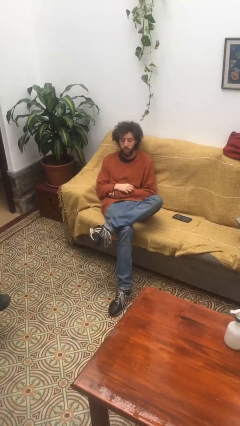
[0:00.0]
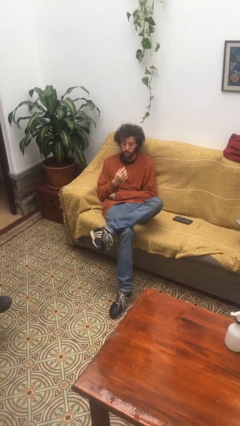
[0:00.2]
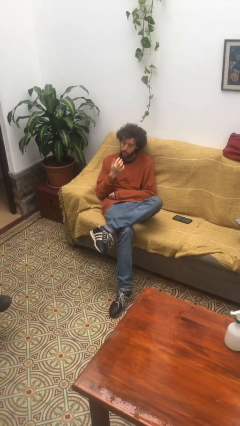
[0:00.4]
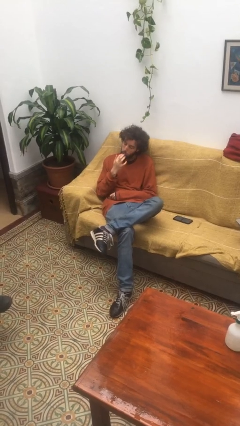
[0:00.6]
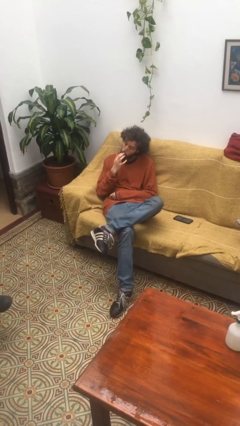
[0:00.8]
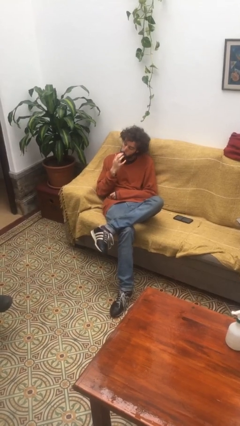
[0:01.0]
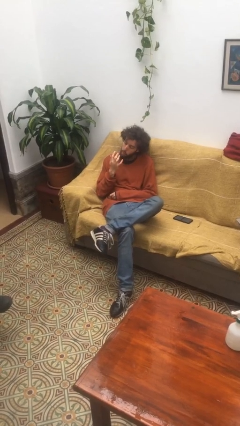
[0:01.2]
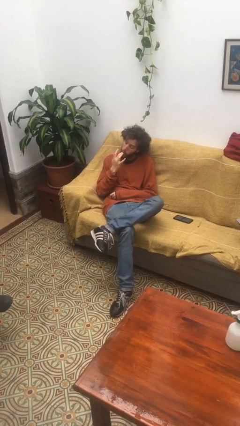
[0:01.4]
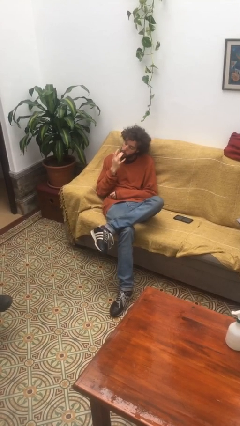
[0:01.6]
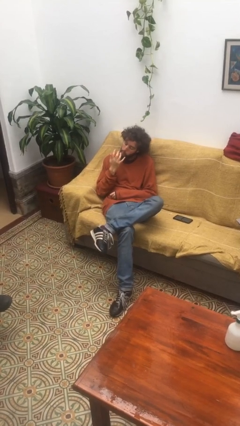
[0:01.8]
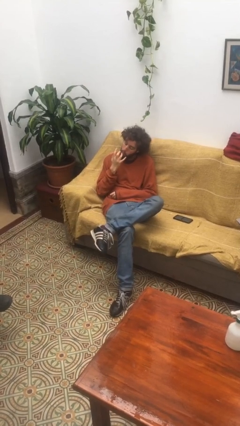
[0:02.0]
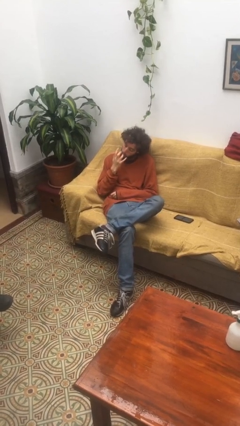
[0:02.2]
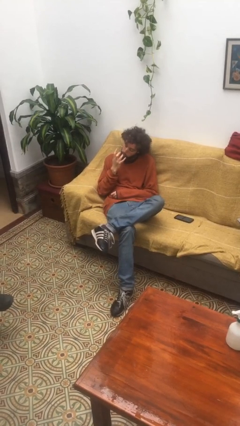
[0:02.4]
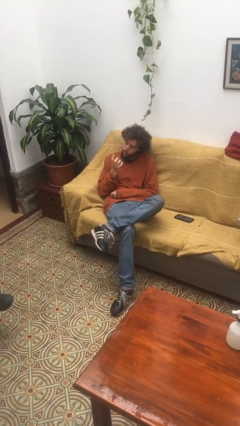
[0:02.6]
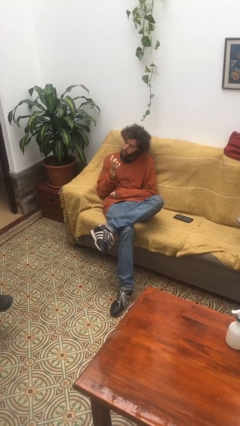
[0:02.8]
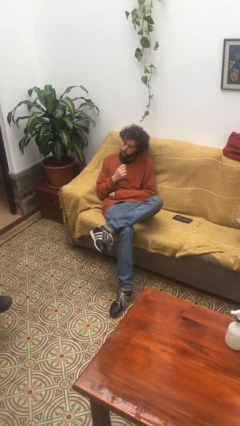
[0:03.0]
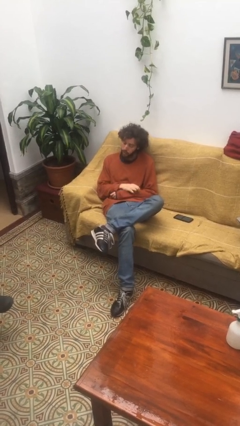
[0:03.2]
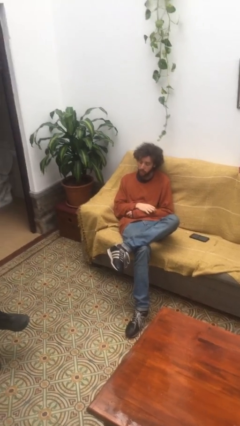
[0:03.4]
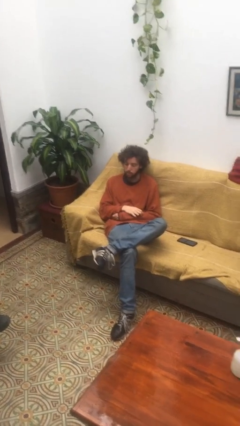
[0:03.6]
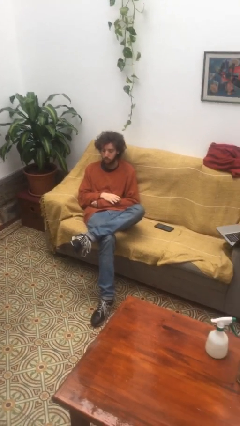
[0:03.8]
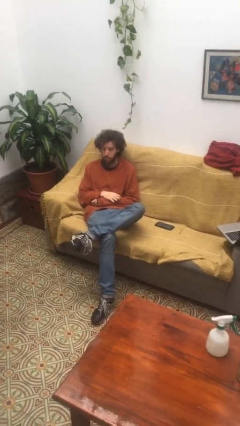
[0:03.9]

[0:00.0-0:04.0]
person licks fingers

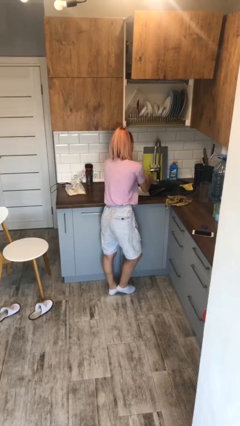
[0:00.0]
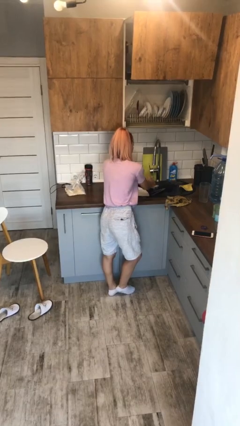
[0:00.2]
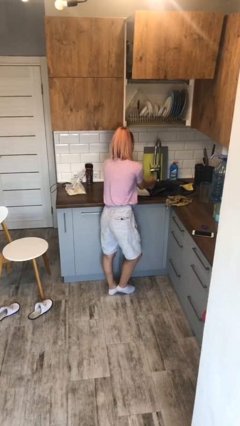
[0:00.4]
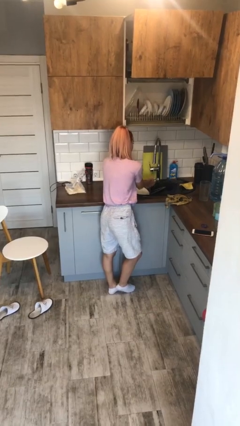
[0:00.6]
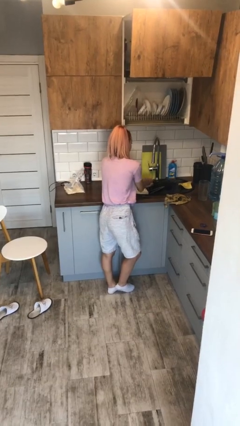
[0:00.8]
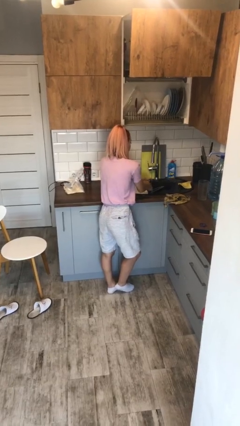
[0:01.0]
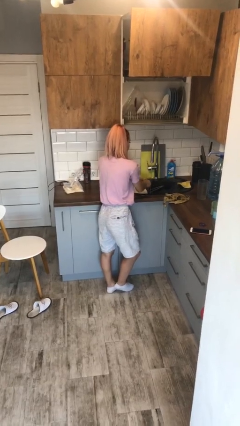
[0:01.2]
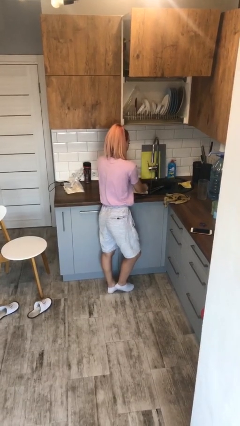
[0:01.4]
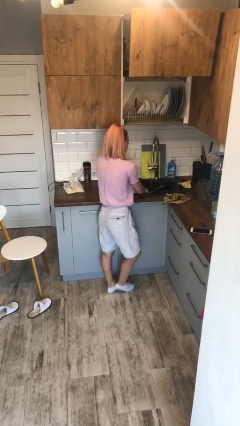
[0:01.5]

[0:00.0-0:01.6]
person washes hands

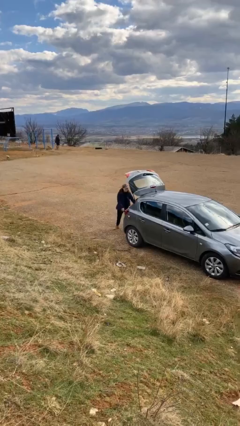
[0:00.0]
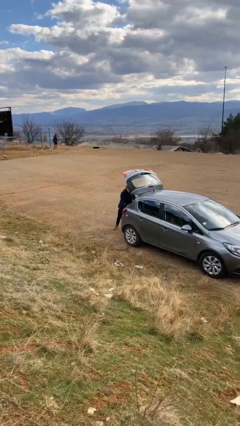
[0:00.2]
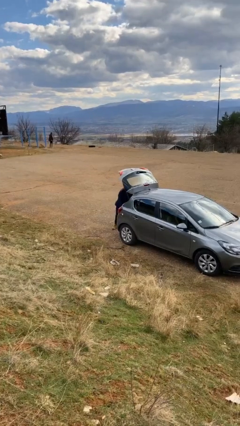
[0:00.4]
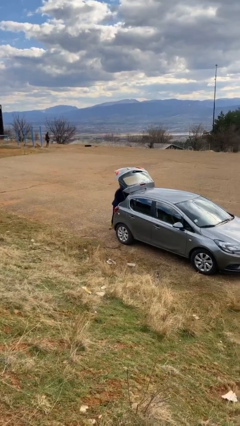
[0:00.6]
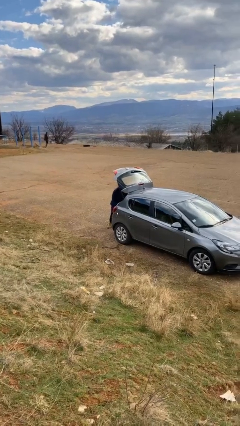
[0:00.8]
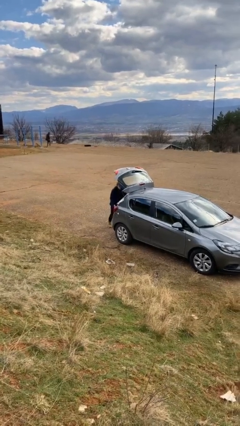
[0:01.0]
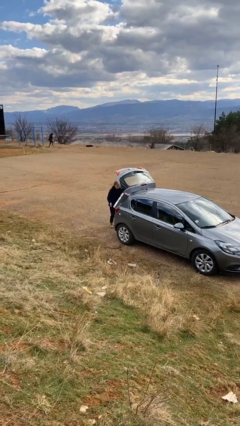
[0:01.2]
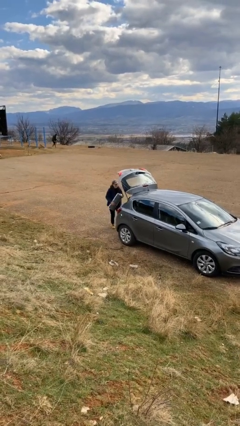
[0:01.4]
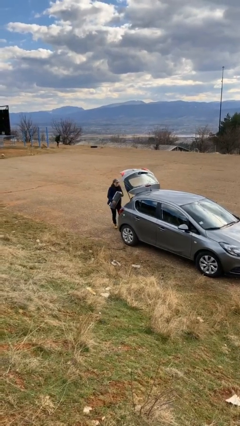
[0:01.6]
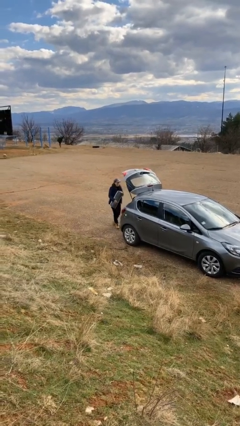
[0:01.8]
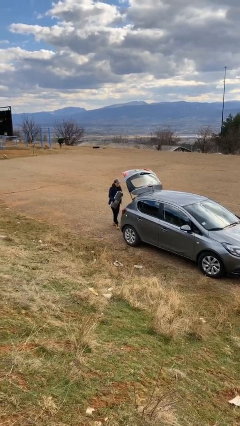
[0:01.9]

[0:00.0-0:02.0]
person unloads car

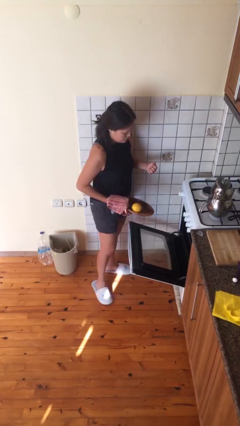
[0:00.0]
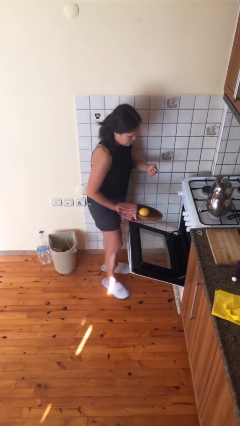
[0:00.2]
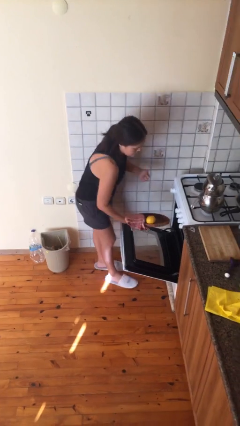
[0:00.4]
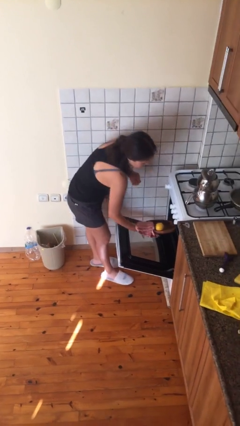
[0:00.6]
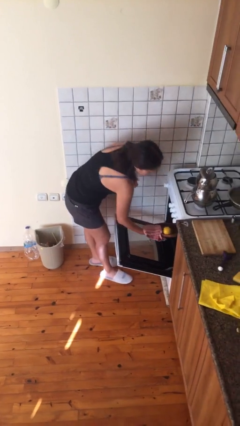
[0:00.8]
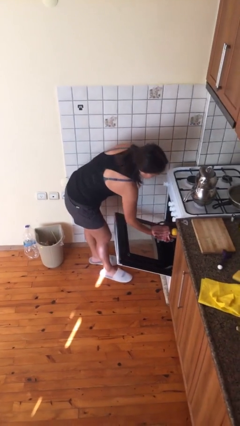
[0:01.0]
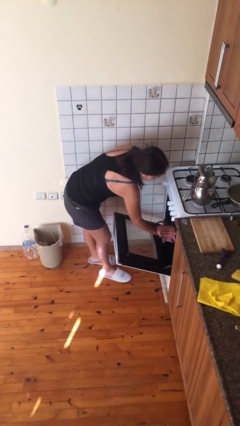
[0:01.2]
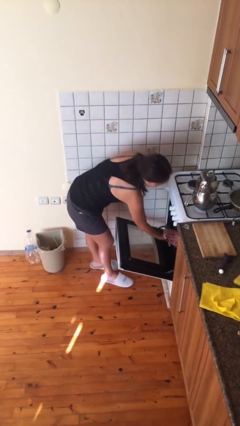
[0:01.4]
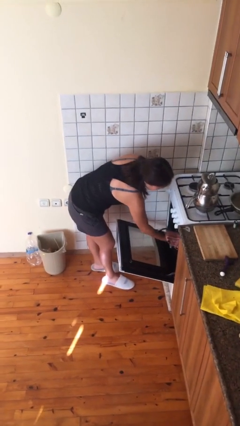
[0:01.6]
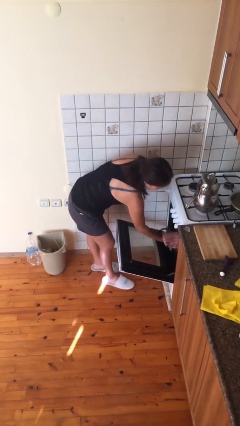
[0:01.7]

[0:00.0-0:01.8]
person puts object into oven

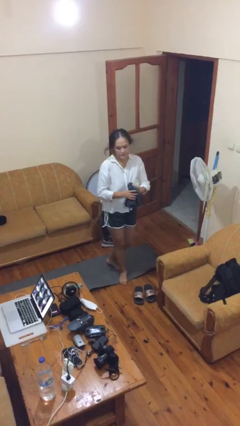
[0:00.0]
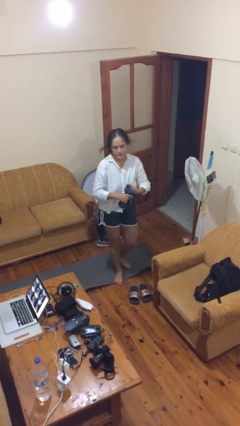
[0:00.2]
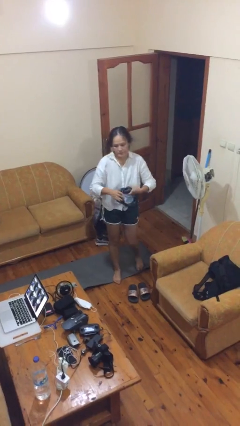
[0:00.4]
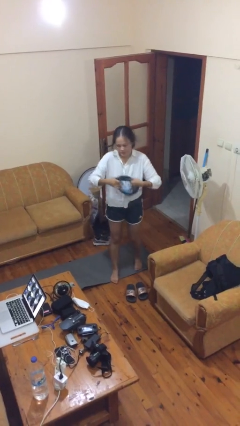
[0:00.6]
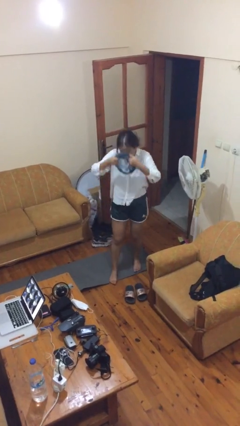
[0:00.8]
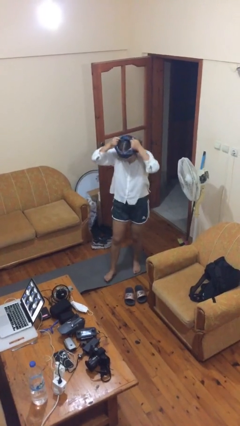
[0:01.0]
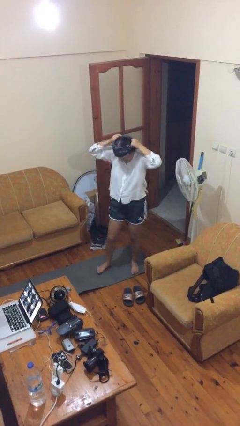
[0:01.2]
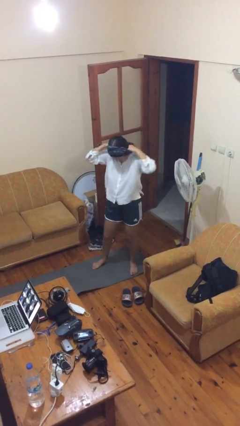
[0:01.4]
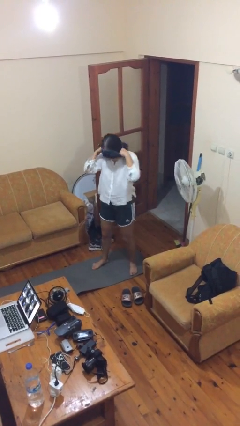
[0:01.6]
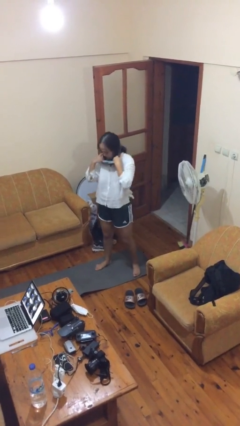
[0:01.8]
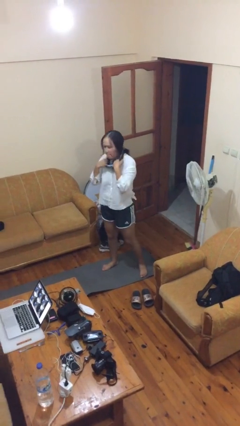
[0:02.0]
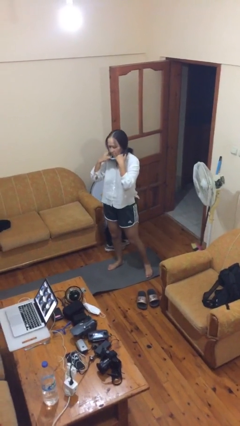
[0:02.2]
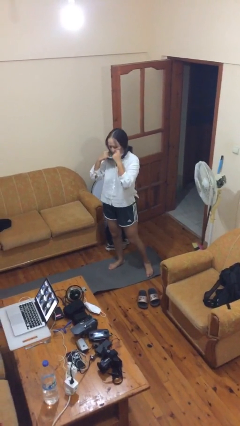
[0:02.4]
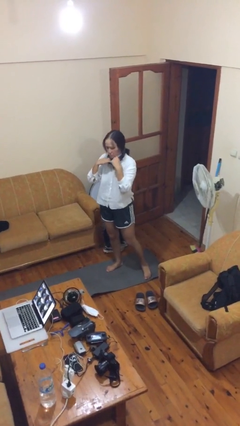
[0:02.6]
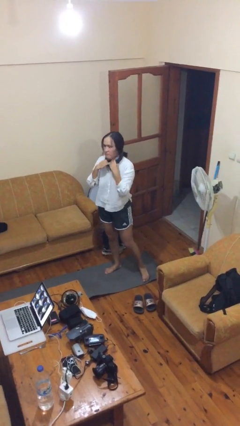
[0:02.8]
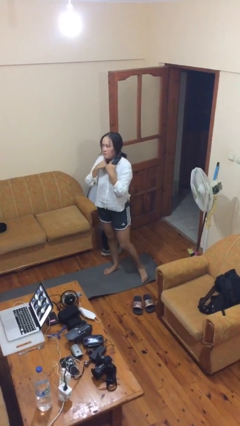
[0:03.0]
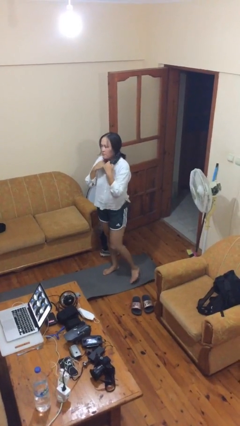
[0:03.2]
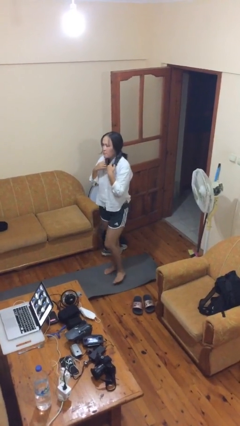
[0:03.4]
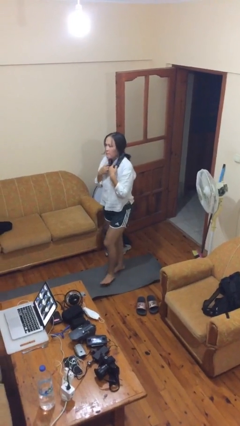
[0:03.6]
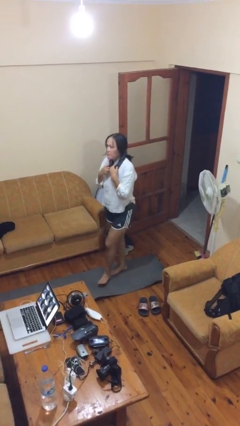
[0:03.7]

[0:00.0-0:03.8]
person puts on scarf

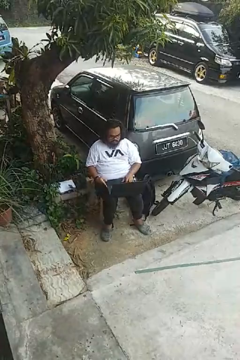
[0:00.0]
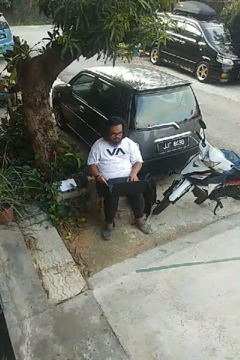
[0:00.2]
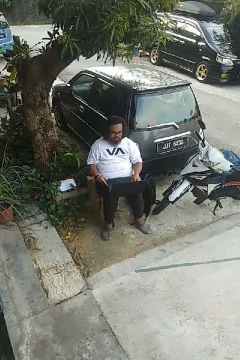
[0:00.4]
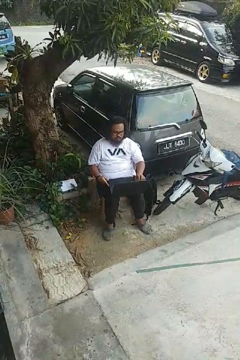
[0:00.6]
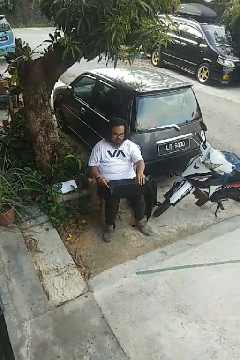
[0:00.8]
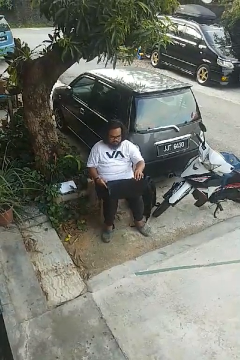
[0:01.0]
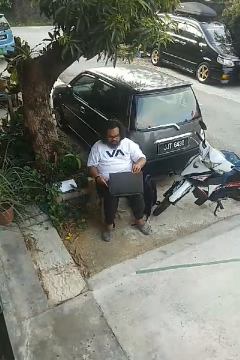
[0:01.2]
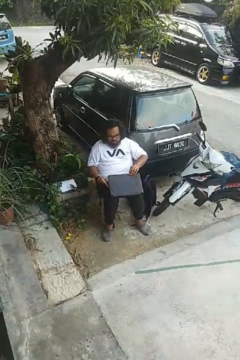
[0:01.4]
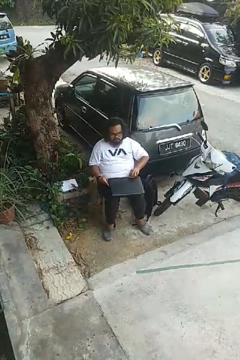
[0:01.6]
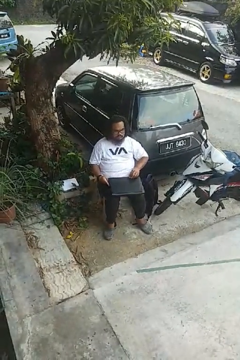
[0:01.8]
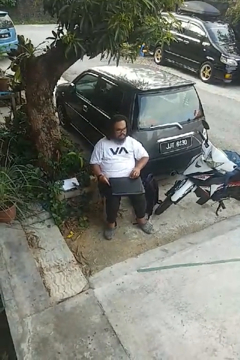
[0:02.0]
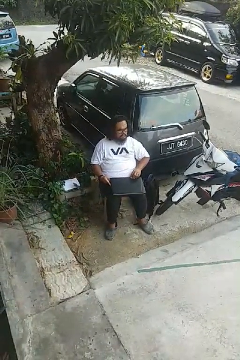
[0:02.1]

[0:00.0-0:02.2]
person closes laptop

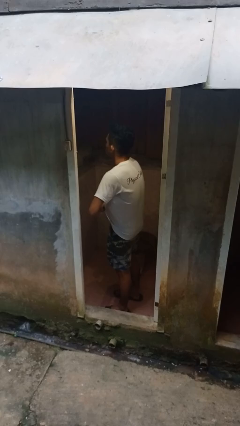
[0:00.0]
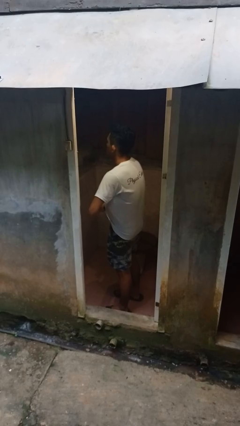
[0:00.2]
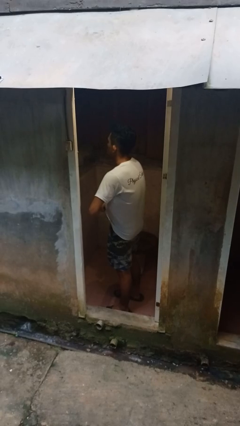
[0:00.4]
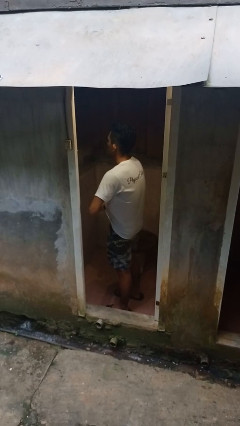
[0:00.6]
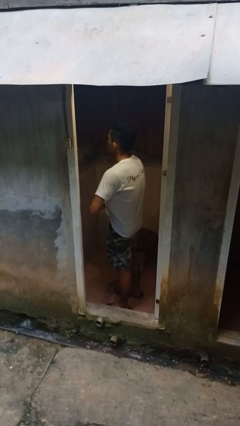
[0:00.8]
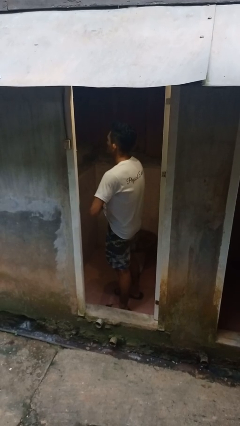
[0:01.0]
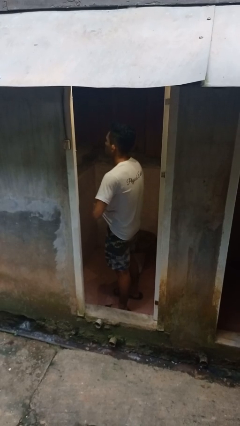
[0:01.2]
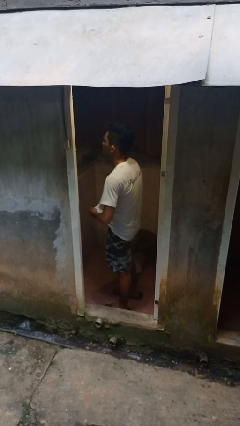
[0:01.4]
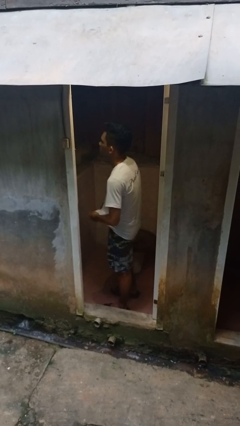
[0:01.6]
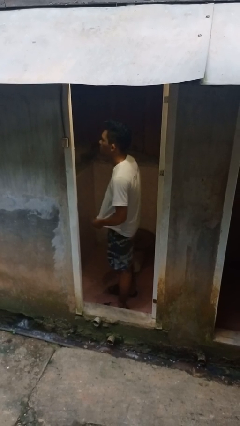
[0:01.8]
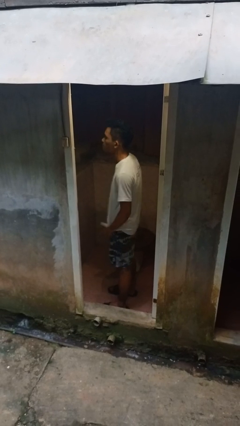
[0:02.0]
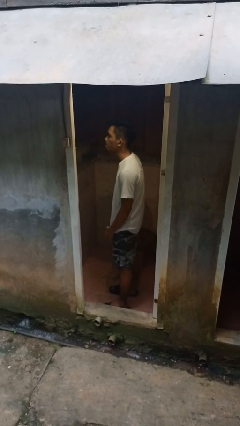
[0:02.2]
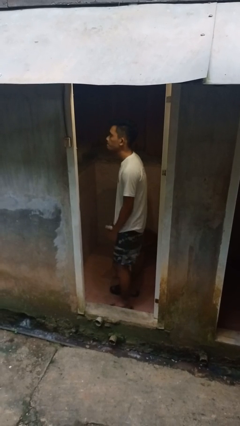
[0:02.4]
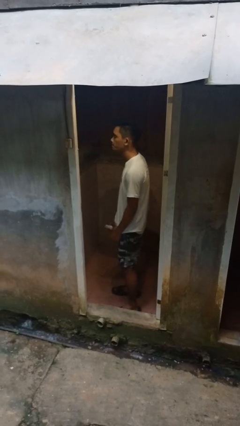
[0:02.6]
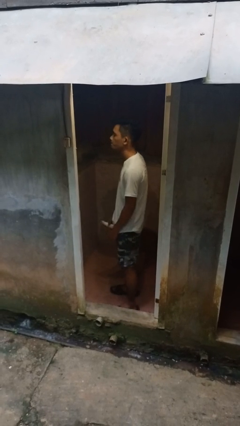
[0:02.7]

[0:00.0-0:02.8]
person applies deodorant
